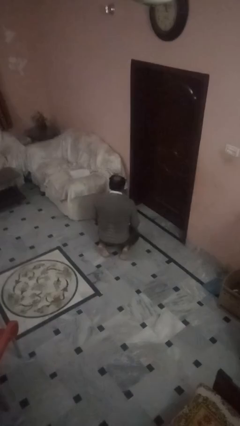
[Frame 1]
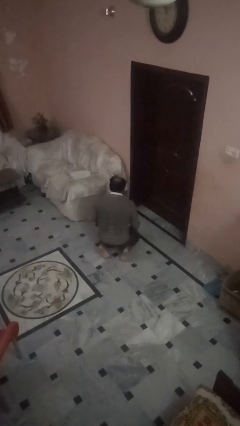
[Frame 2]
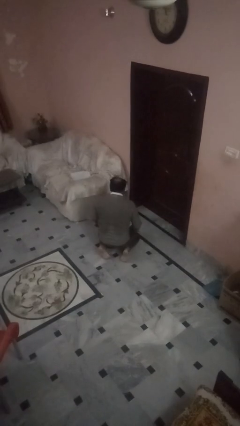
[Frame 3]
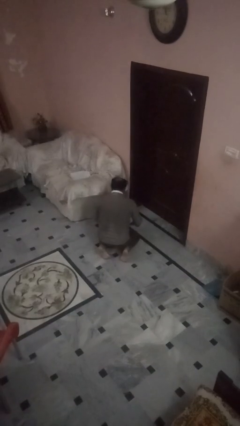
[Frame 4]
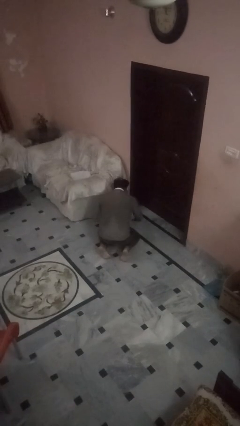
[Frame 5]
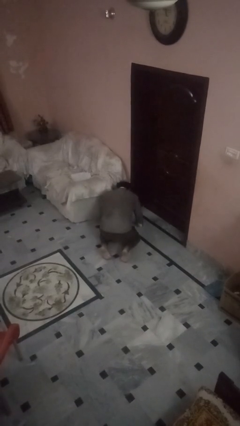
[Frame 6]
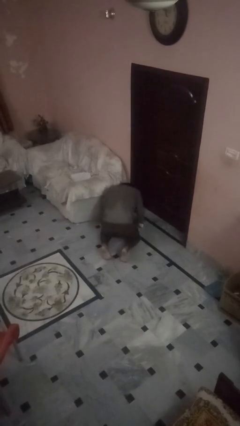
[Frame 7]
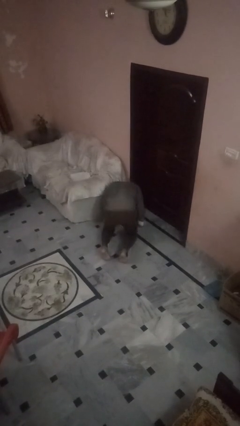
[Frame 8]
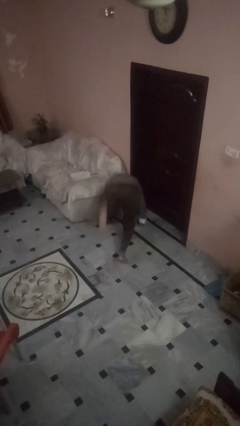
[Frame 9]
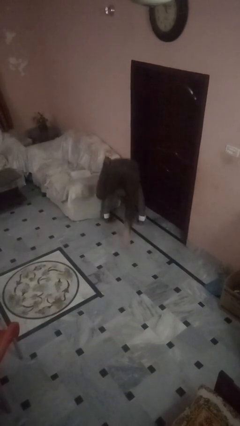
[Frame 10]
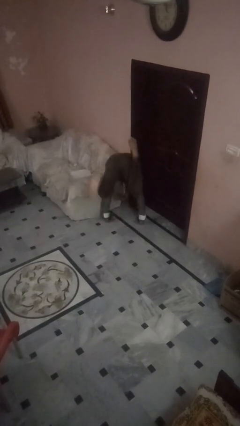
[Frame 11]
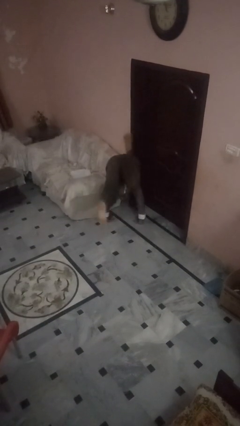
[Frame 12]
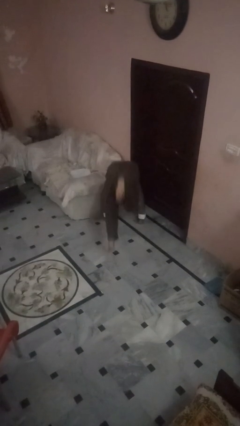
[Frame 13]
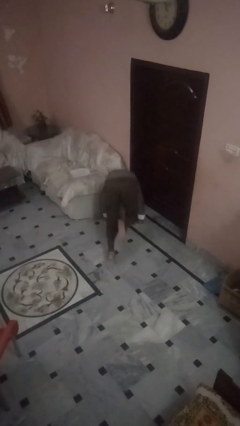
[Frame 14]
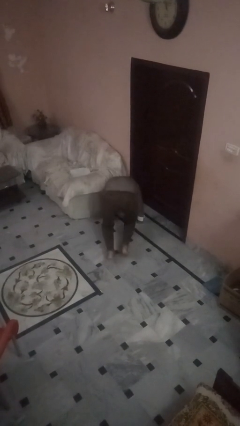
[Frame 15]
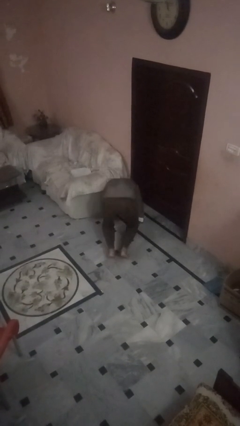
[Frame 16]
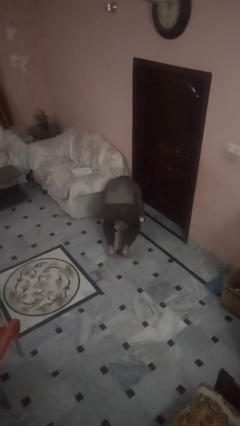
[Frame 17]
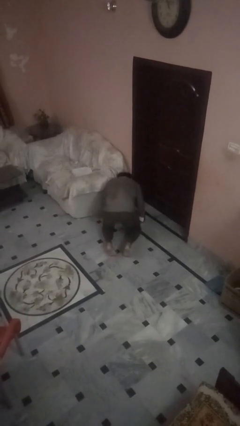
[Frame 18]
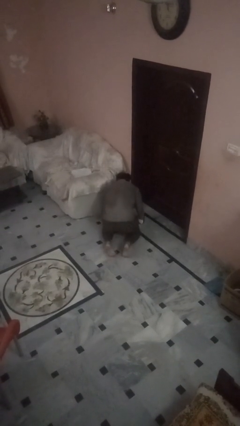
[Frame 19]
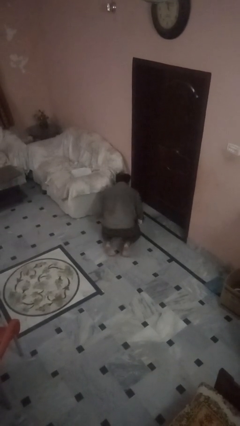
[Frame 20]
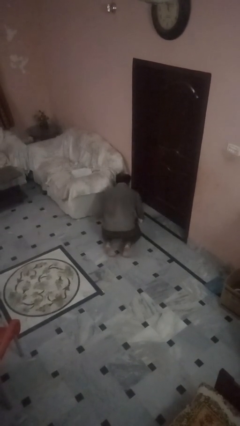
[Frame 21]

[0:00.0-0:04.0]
person somersaults

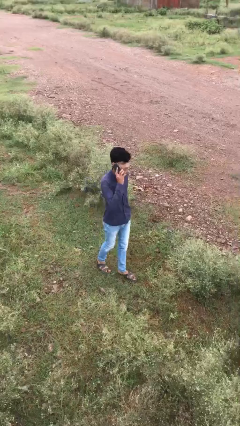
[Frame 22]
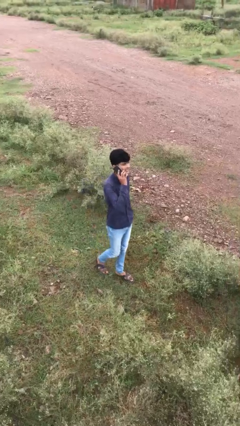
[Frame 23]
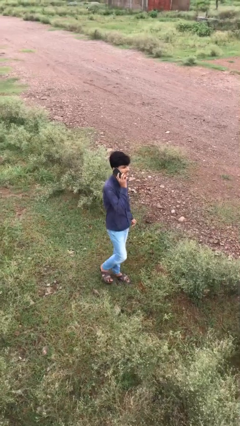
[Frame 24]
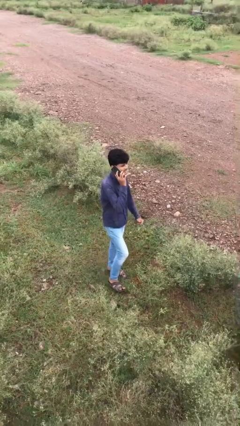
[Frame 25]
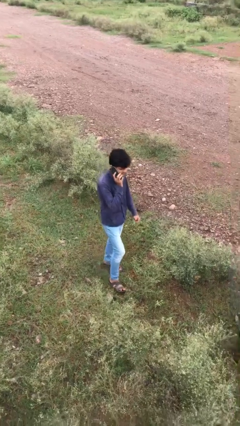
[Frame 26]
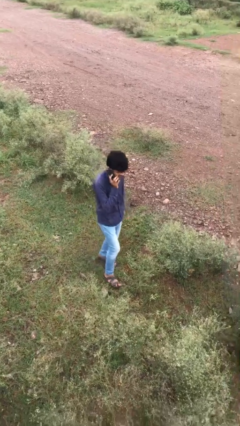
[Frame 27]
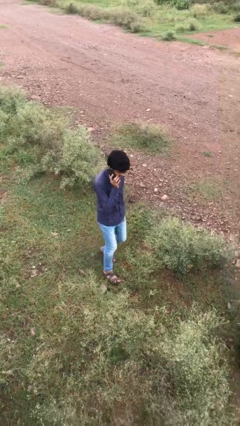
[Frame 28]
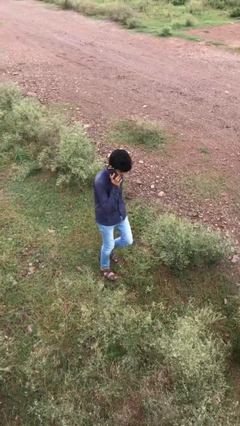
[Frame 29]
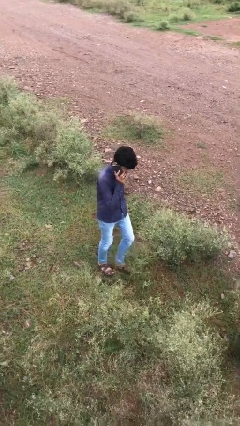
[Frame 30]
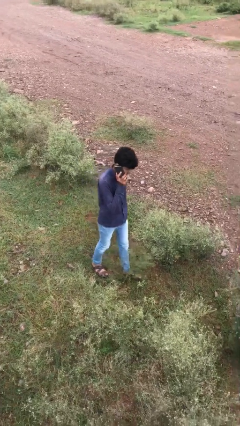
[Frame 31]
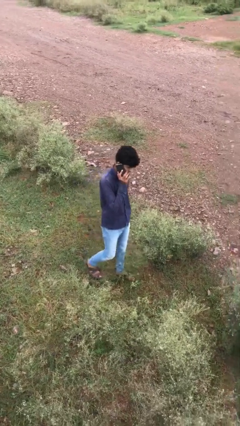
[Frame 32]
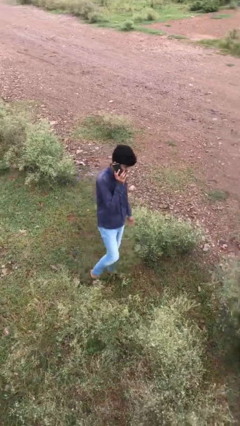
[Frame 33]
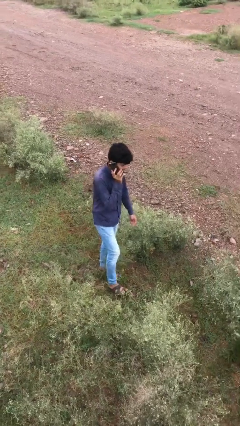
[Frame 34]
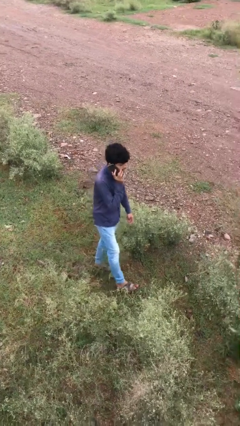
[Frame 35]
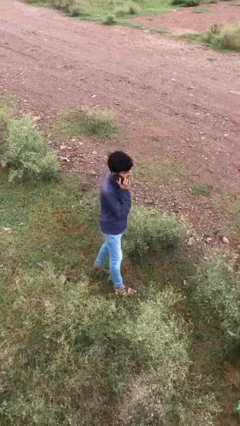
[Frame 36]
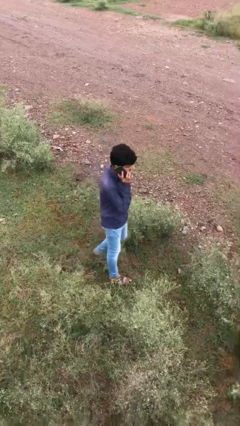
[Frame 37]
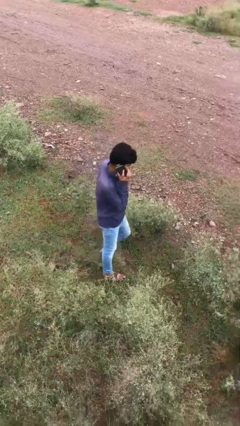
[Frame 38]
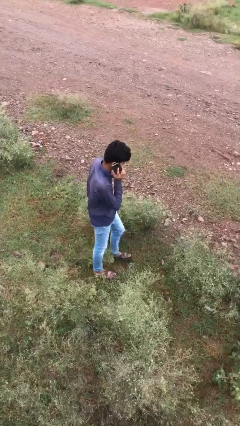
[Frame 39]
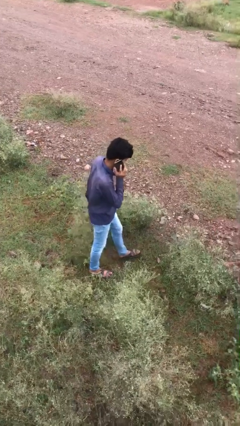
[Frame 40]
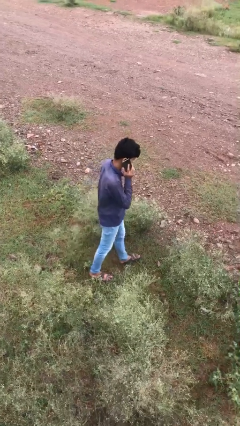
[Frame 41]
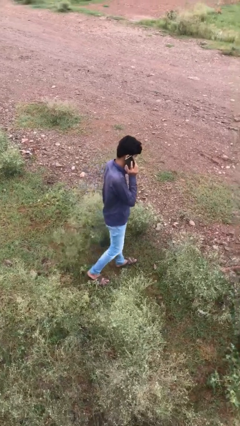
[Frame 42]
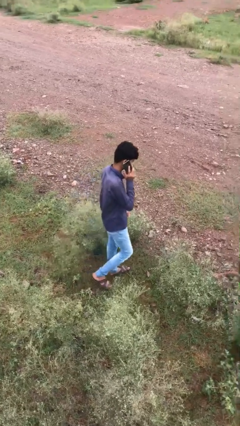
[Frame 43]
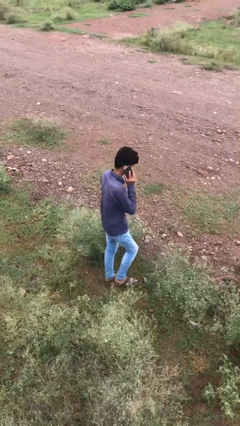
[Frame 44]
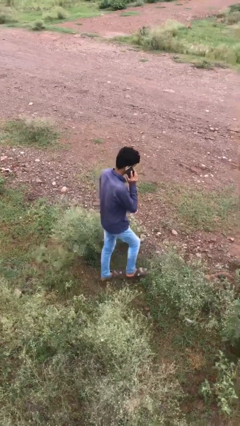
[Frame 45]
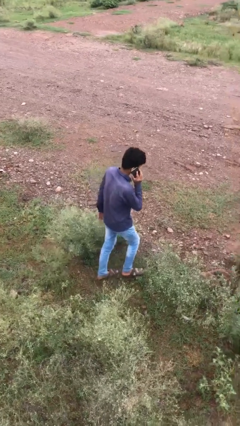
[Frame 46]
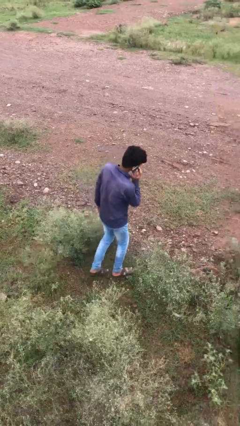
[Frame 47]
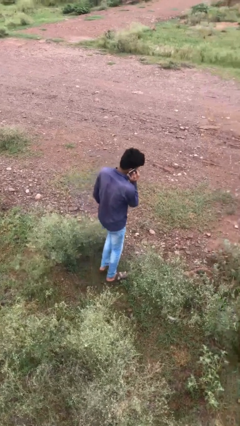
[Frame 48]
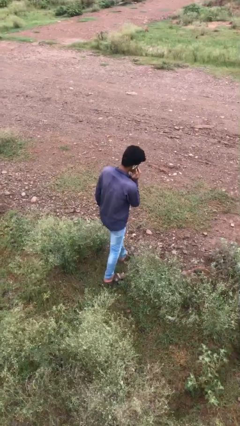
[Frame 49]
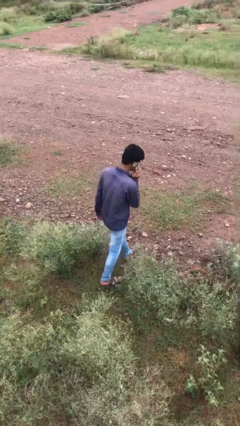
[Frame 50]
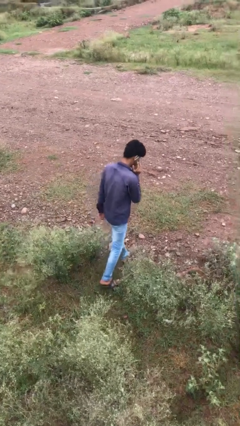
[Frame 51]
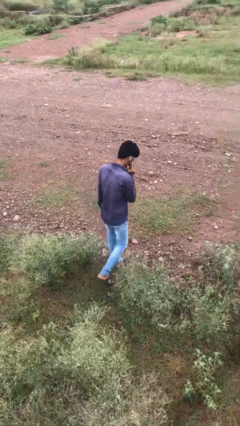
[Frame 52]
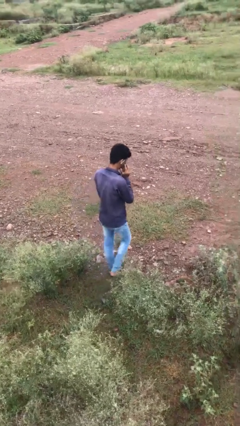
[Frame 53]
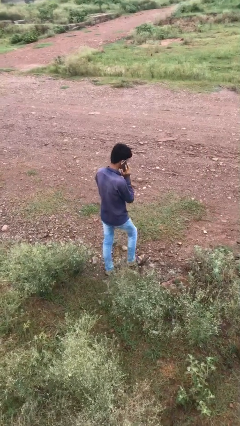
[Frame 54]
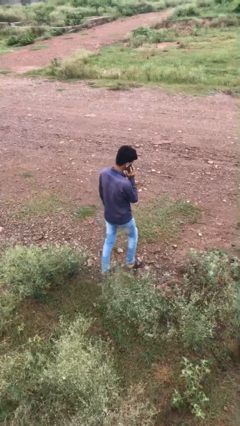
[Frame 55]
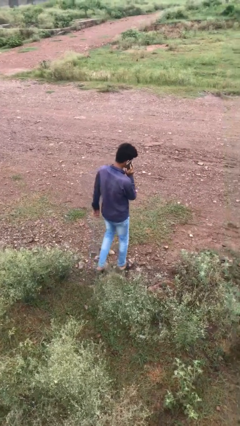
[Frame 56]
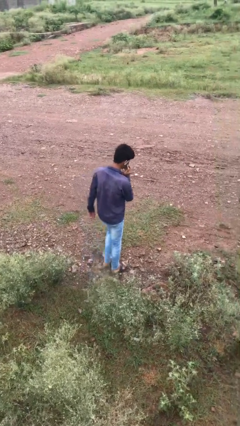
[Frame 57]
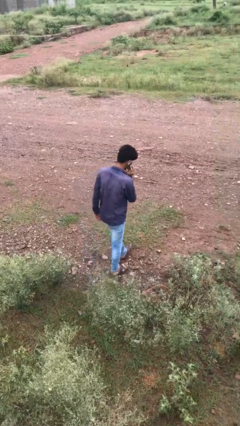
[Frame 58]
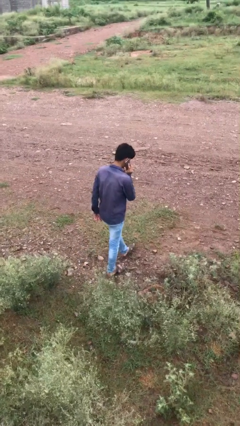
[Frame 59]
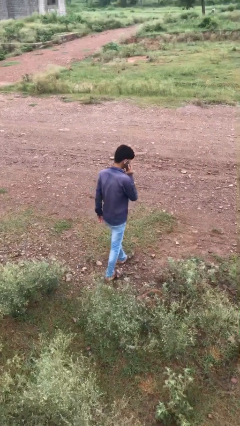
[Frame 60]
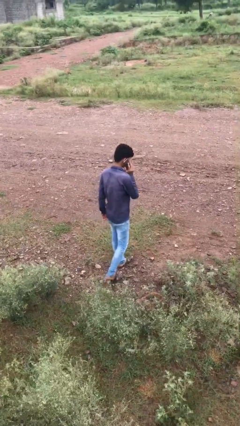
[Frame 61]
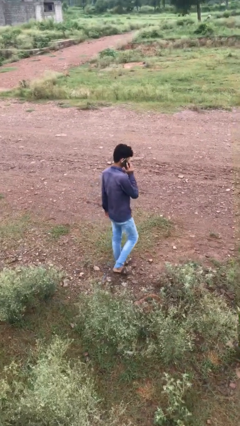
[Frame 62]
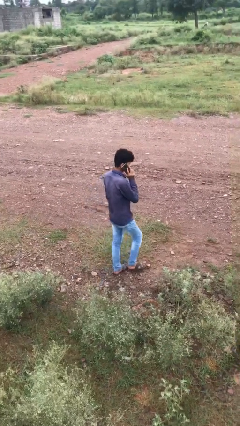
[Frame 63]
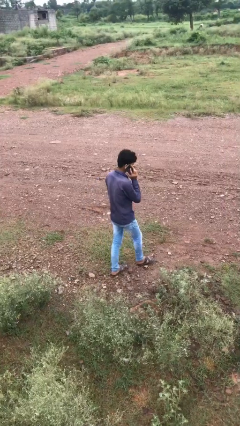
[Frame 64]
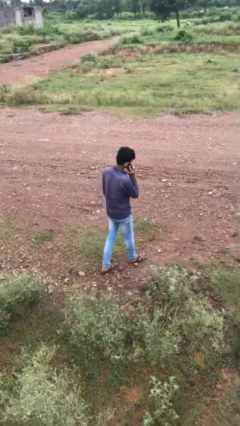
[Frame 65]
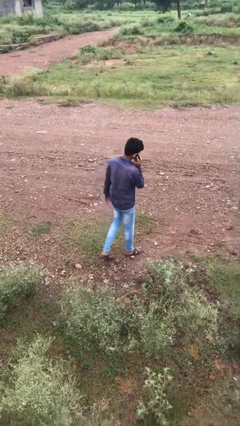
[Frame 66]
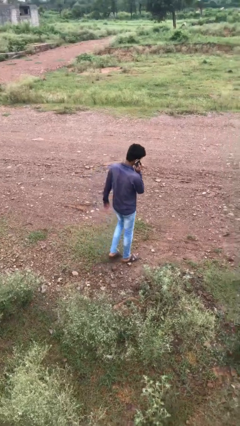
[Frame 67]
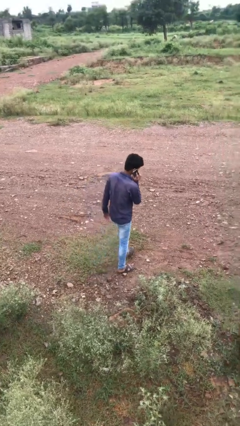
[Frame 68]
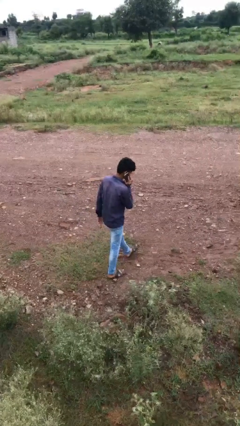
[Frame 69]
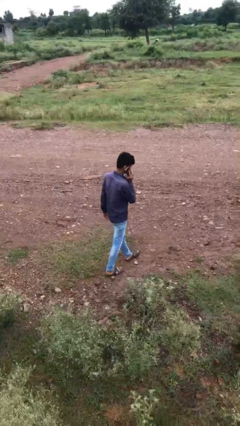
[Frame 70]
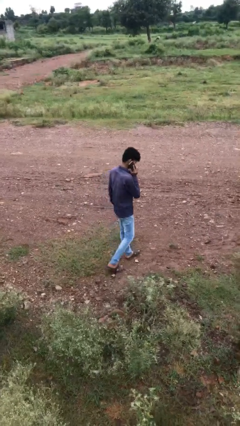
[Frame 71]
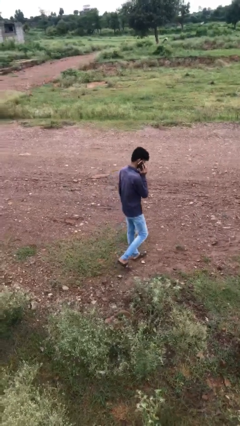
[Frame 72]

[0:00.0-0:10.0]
person talks on phone

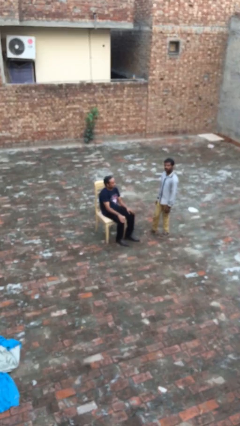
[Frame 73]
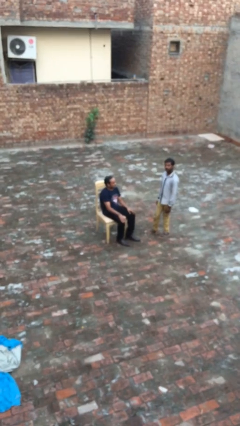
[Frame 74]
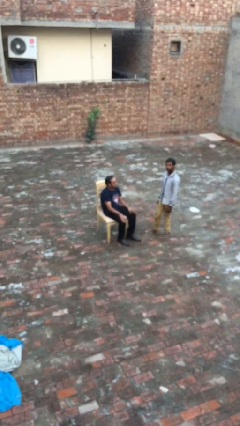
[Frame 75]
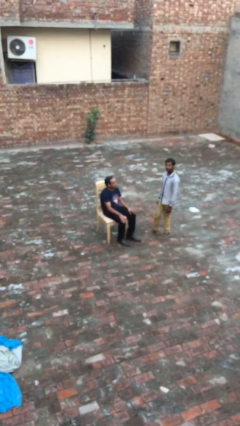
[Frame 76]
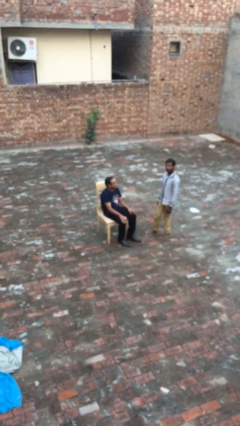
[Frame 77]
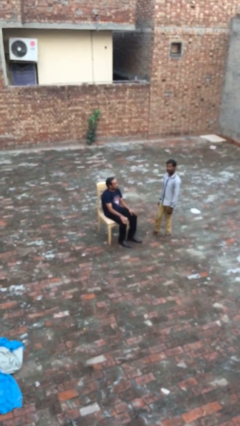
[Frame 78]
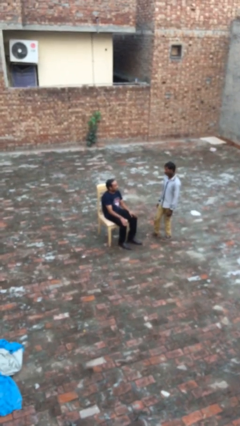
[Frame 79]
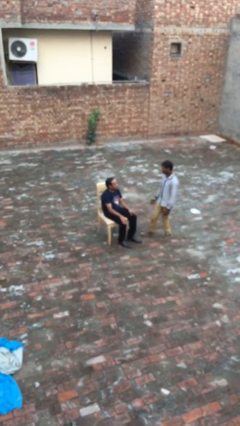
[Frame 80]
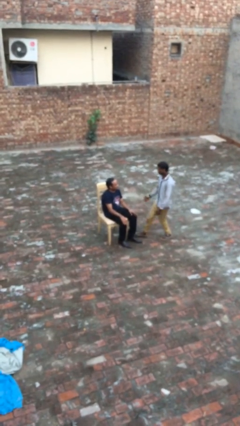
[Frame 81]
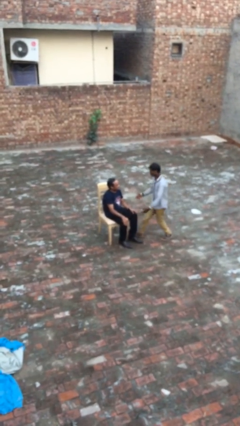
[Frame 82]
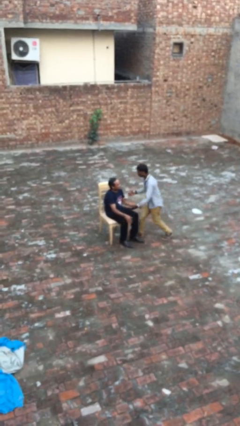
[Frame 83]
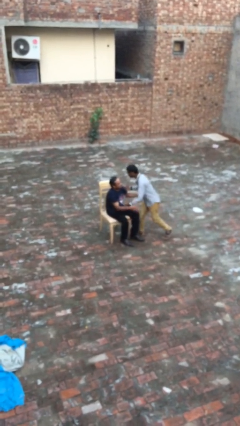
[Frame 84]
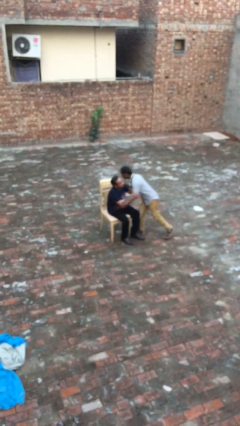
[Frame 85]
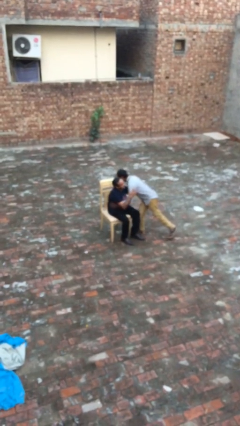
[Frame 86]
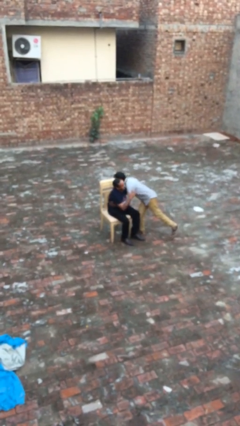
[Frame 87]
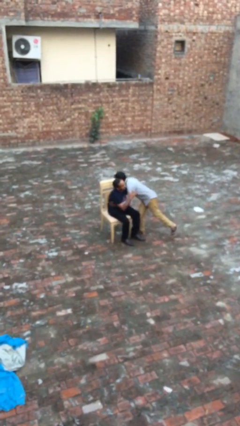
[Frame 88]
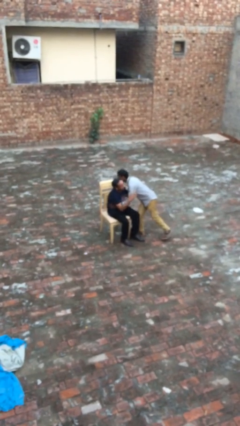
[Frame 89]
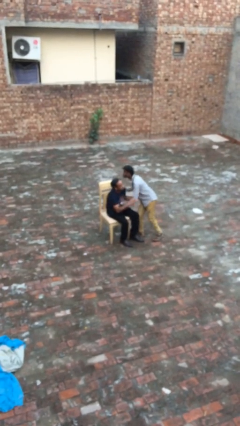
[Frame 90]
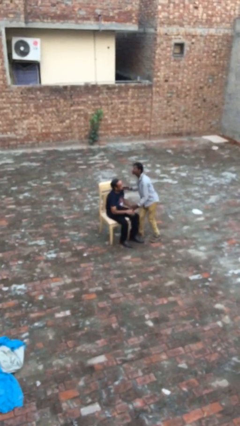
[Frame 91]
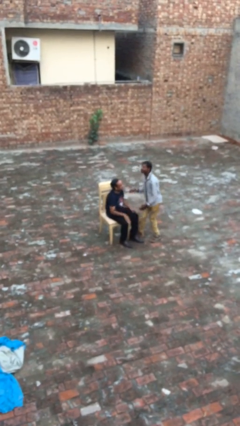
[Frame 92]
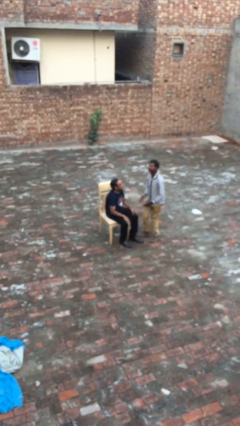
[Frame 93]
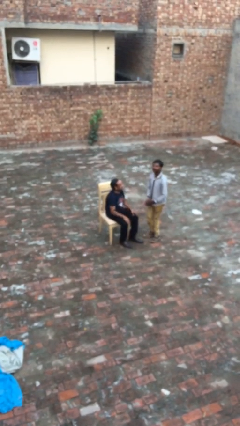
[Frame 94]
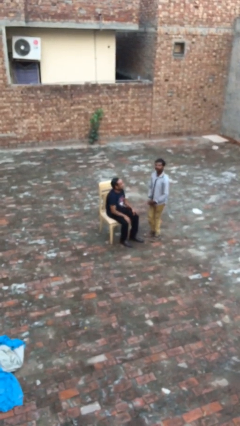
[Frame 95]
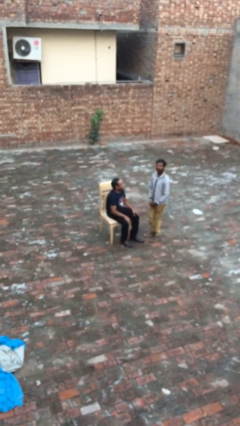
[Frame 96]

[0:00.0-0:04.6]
person embraces person
